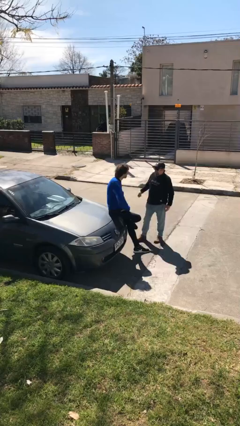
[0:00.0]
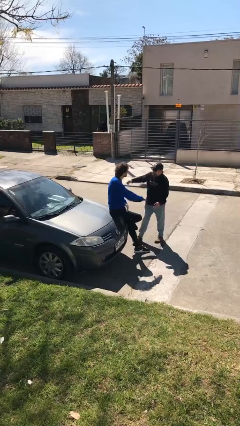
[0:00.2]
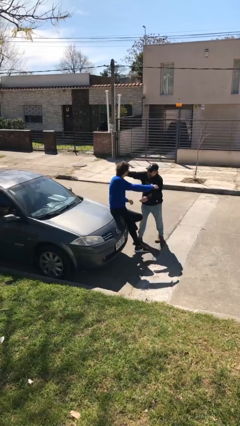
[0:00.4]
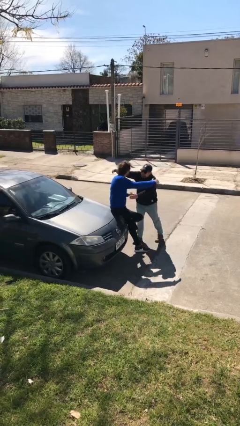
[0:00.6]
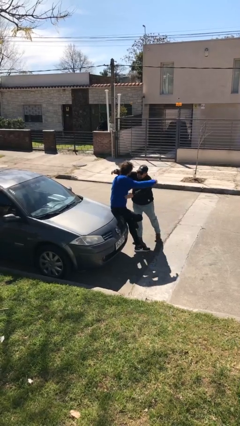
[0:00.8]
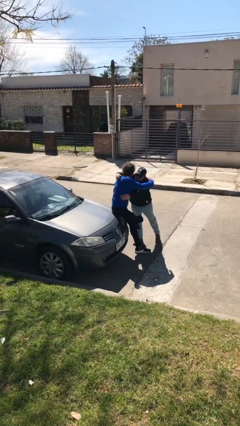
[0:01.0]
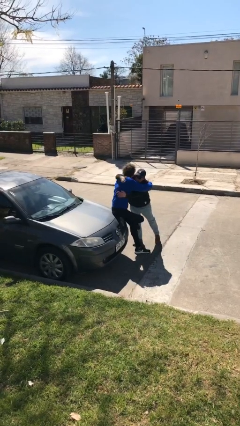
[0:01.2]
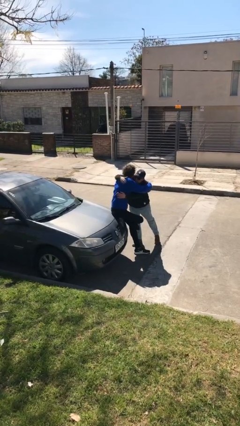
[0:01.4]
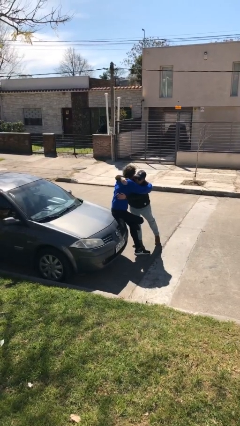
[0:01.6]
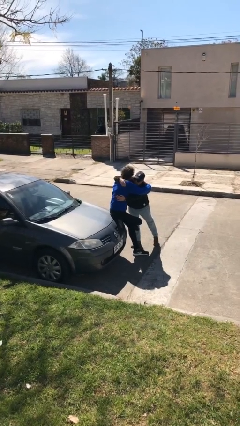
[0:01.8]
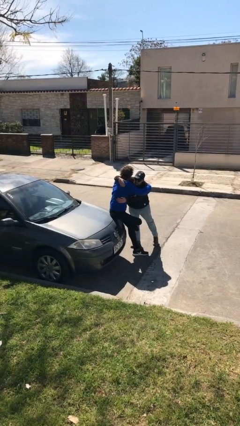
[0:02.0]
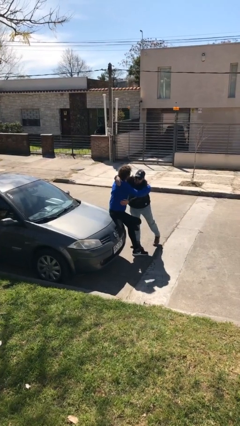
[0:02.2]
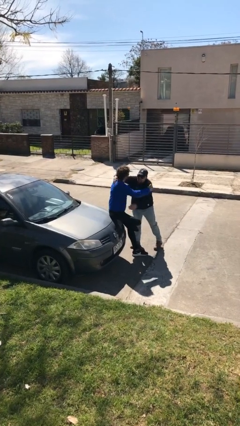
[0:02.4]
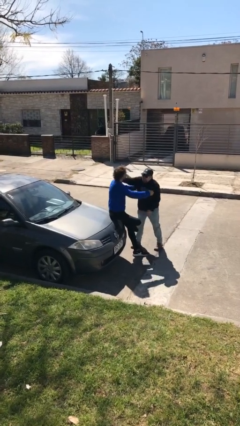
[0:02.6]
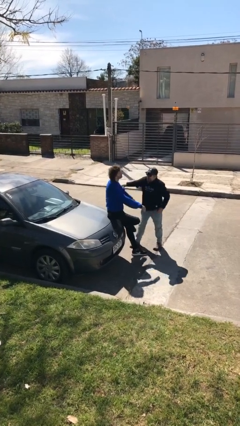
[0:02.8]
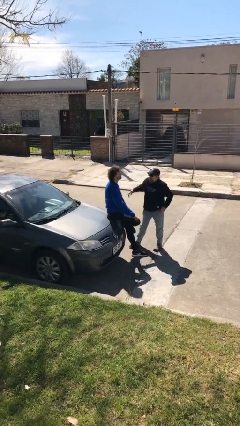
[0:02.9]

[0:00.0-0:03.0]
person embraces person

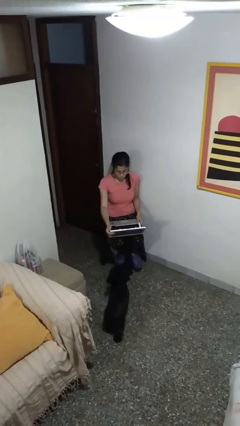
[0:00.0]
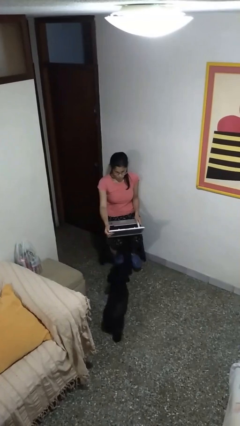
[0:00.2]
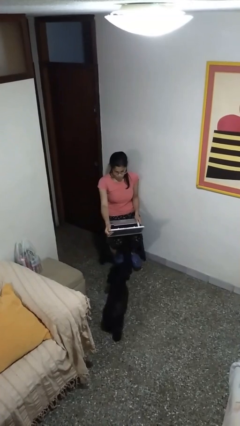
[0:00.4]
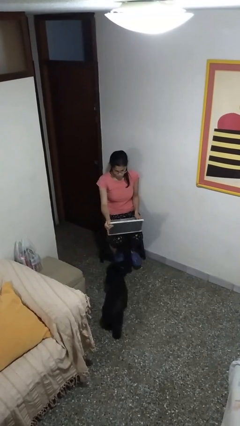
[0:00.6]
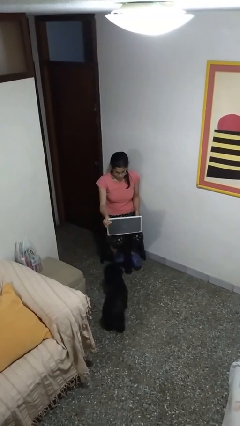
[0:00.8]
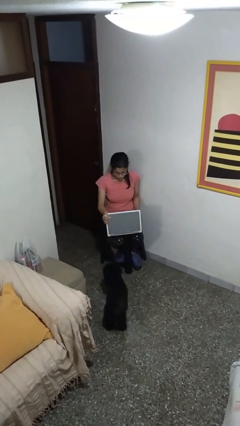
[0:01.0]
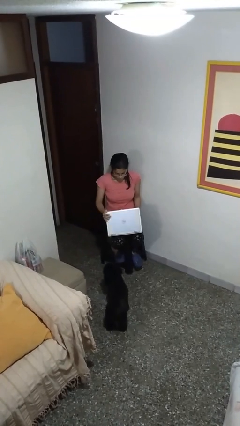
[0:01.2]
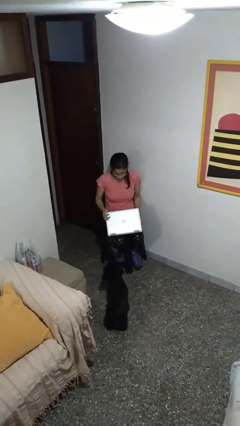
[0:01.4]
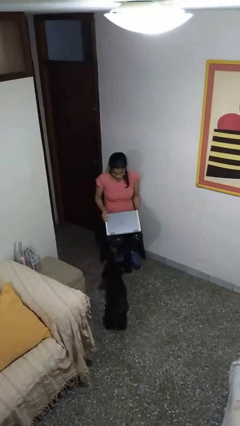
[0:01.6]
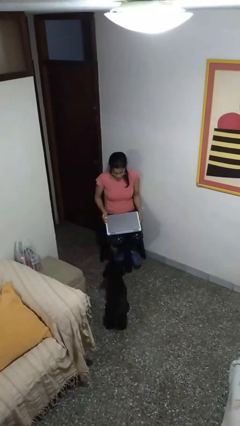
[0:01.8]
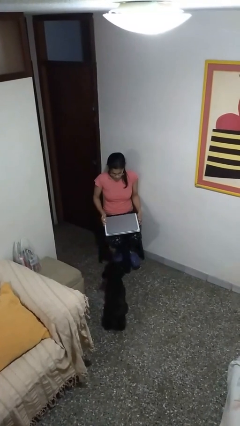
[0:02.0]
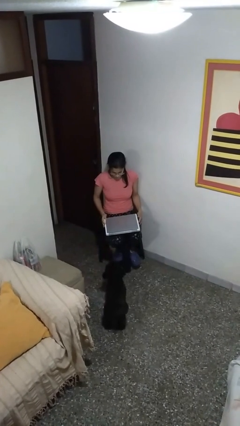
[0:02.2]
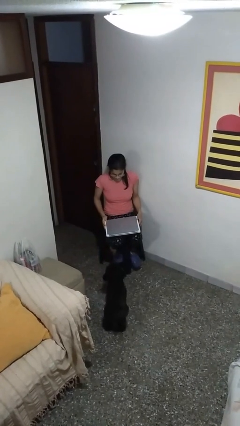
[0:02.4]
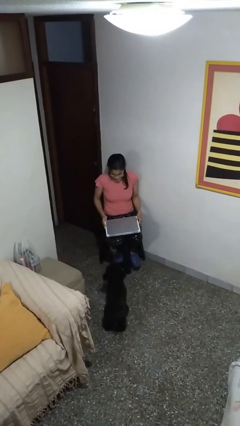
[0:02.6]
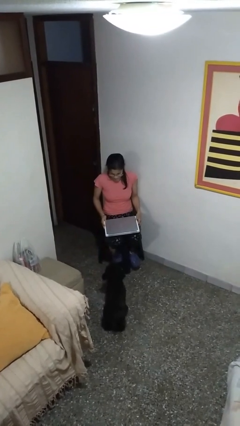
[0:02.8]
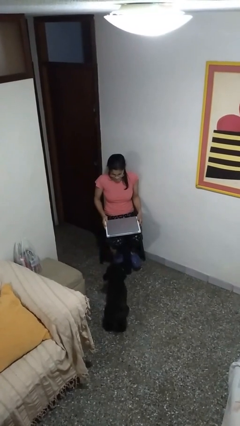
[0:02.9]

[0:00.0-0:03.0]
person closes laptop

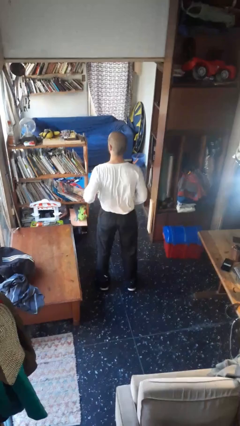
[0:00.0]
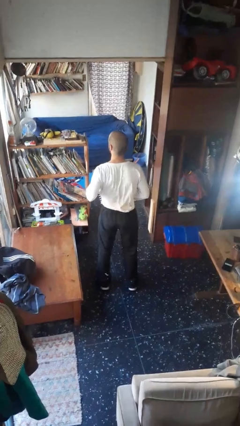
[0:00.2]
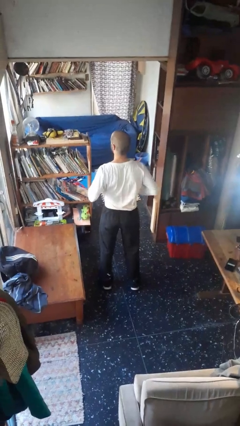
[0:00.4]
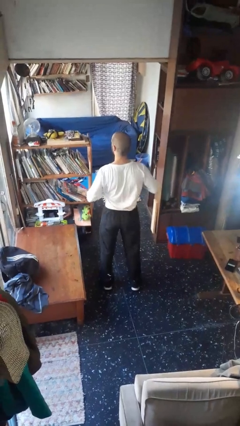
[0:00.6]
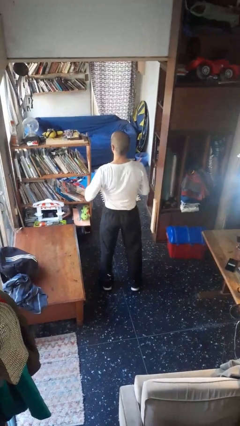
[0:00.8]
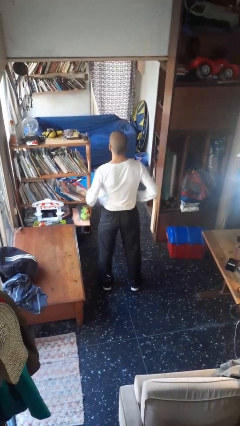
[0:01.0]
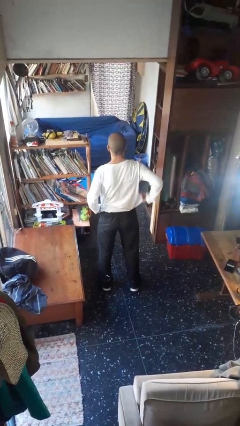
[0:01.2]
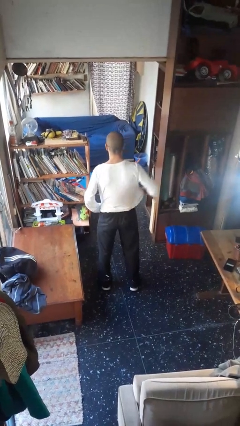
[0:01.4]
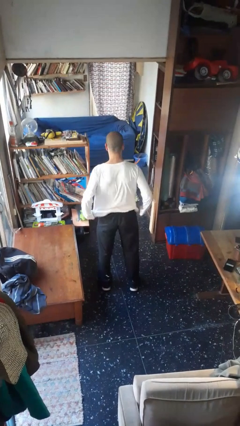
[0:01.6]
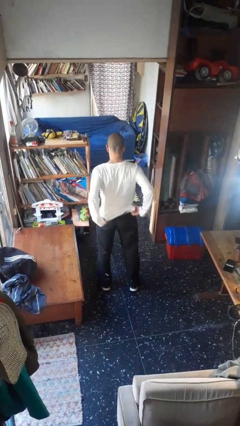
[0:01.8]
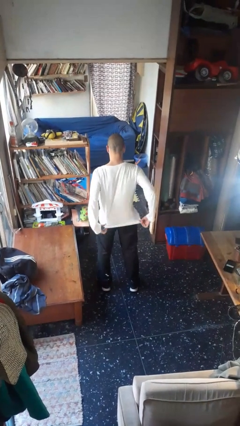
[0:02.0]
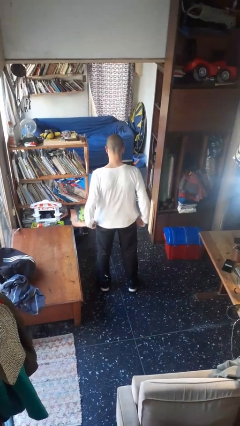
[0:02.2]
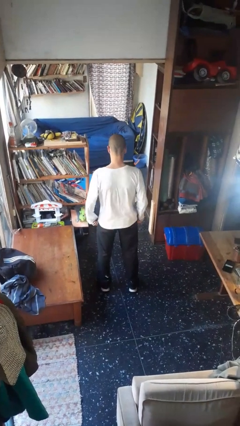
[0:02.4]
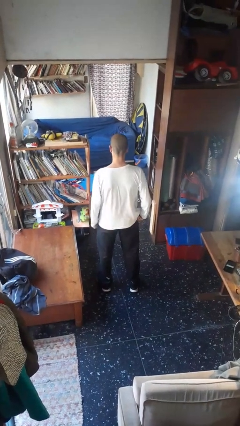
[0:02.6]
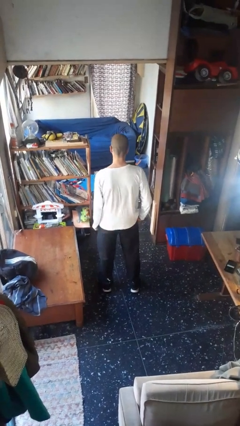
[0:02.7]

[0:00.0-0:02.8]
person untucks shirt

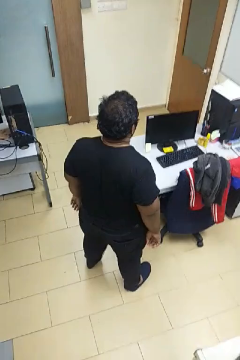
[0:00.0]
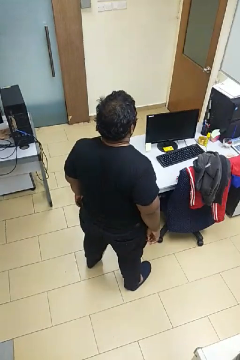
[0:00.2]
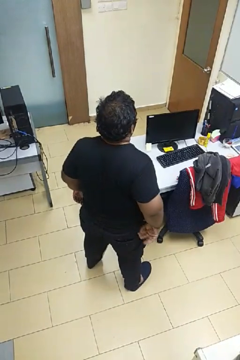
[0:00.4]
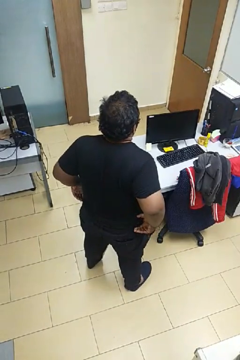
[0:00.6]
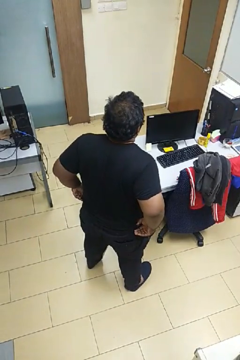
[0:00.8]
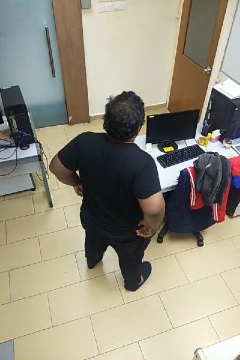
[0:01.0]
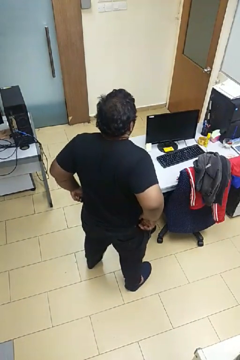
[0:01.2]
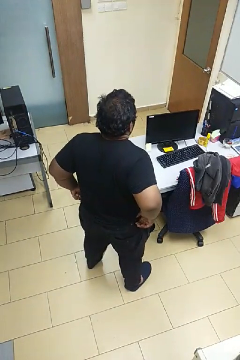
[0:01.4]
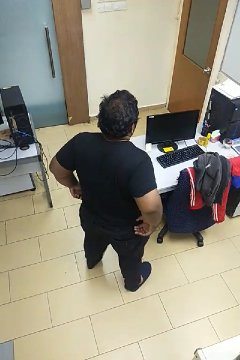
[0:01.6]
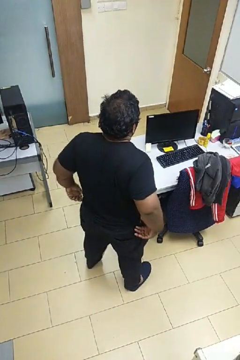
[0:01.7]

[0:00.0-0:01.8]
person hikes up pants

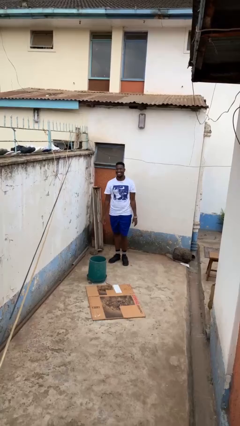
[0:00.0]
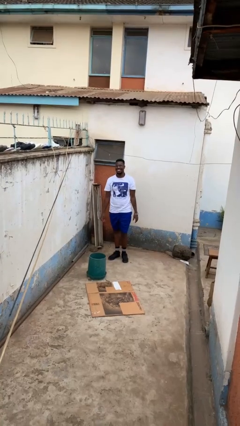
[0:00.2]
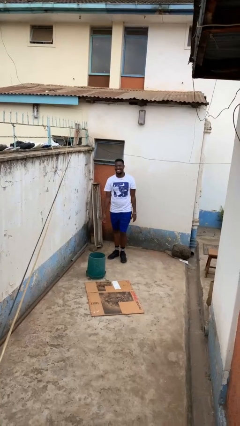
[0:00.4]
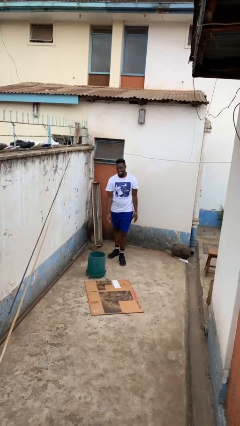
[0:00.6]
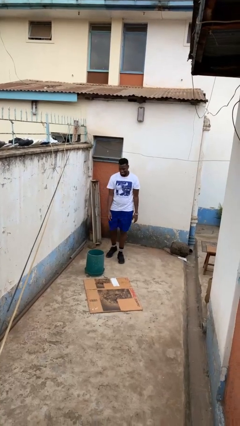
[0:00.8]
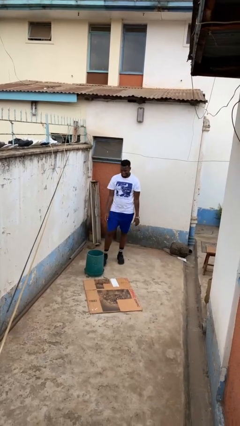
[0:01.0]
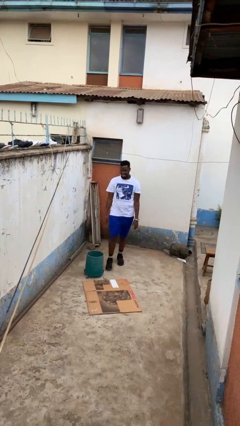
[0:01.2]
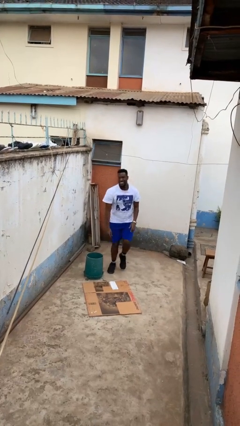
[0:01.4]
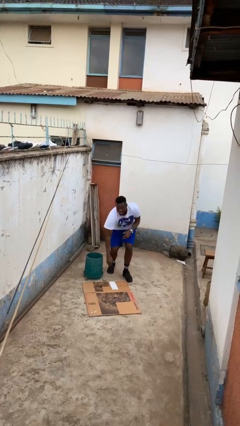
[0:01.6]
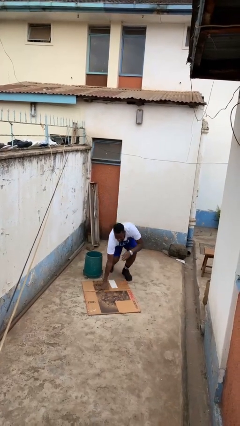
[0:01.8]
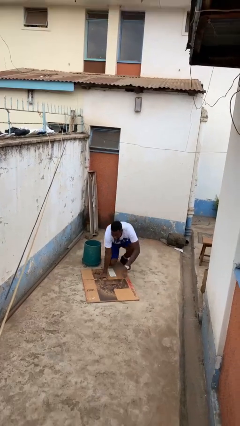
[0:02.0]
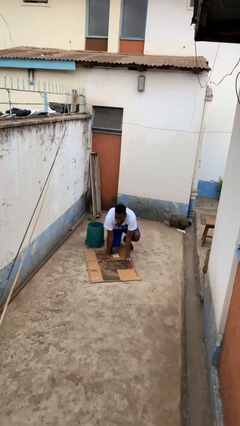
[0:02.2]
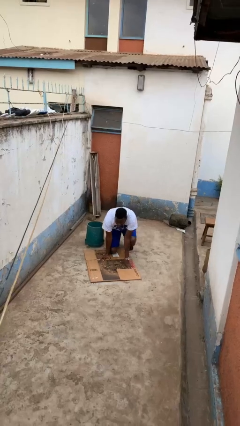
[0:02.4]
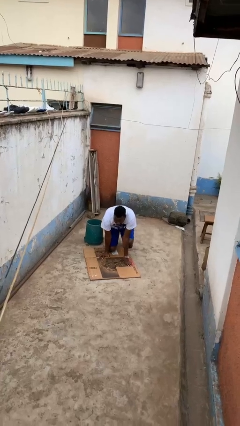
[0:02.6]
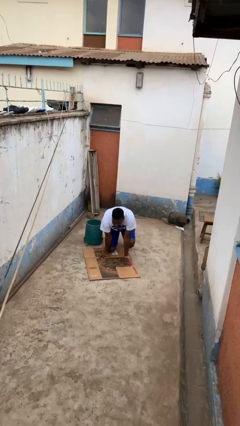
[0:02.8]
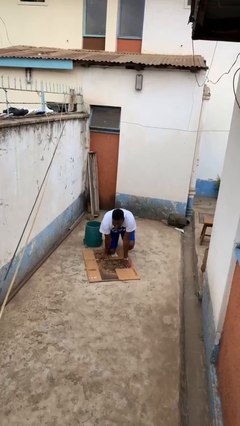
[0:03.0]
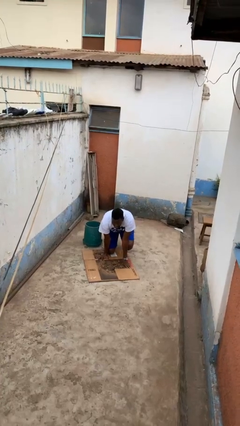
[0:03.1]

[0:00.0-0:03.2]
person trips on object on floor

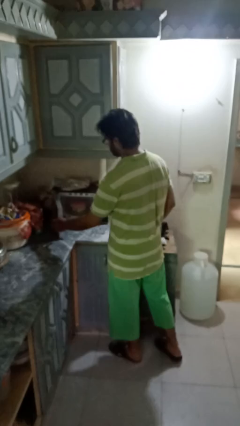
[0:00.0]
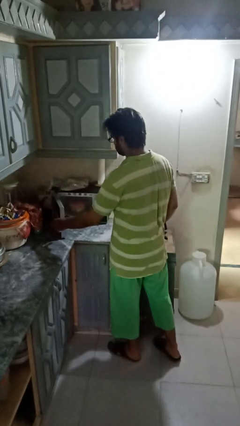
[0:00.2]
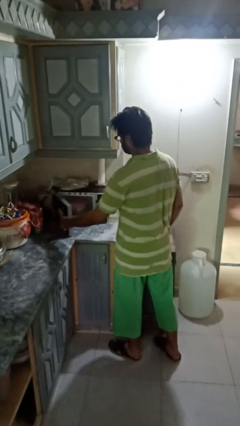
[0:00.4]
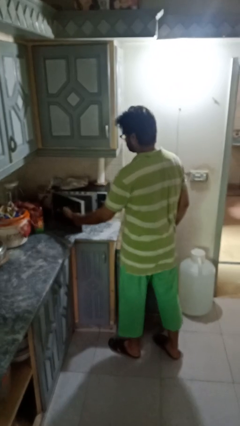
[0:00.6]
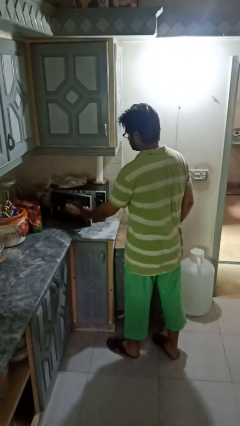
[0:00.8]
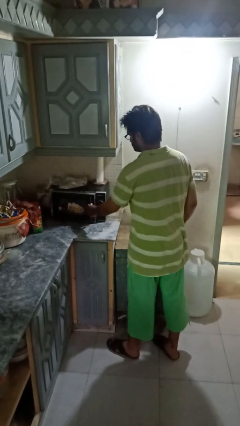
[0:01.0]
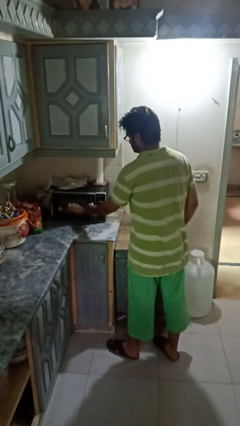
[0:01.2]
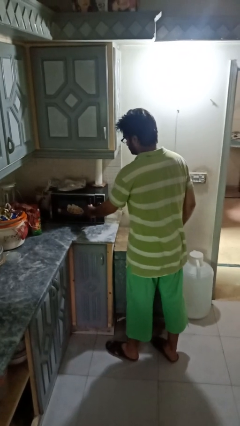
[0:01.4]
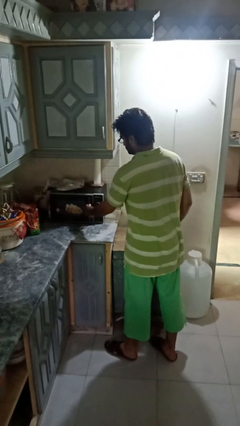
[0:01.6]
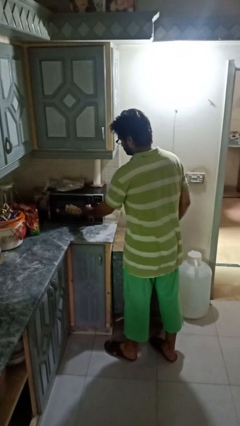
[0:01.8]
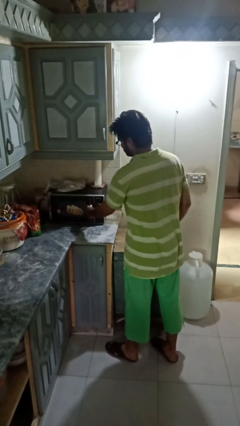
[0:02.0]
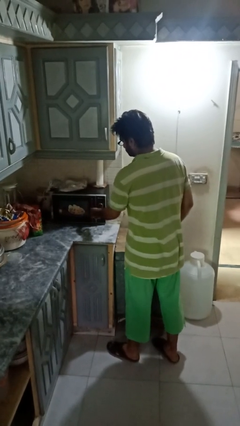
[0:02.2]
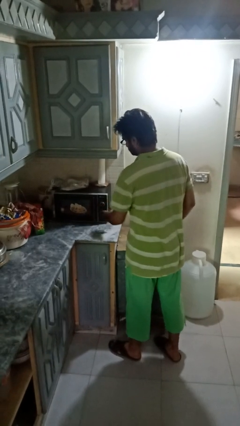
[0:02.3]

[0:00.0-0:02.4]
person closes microwave

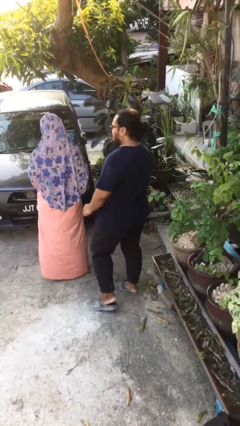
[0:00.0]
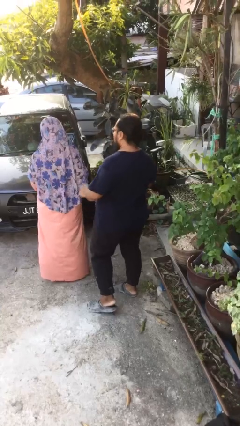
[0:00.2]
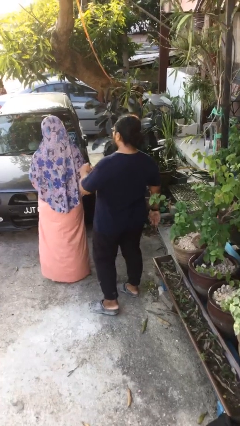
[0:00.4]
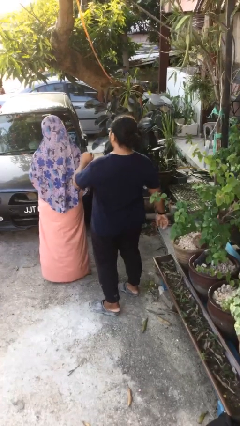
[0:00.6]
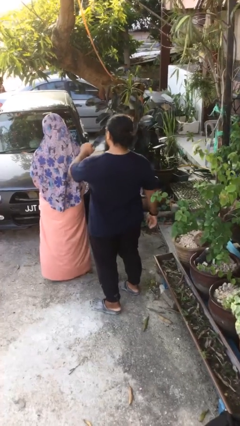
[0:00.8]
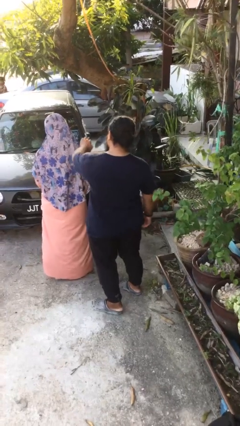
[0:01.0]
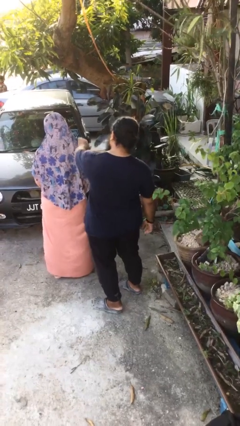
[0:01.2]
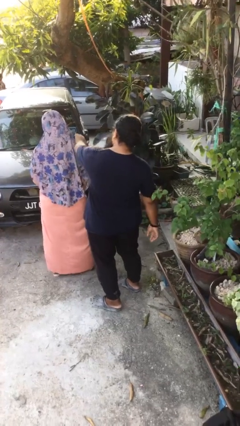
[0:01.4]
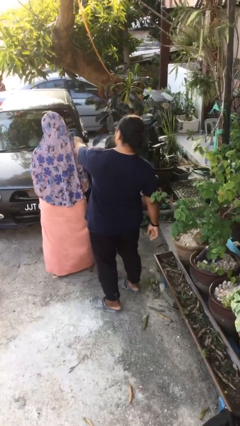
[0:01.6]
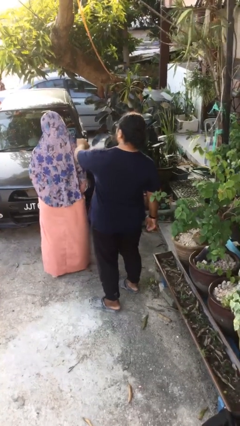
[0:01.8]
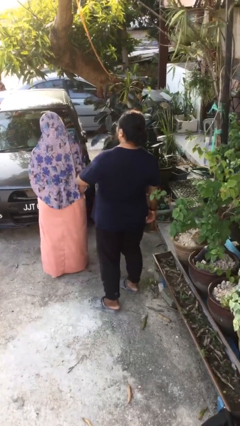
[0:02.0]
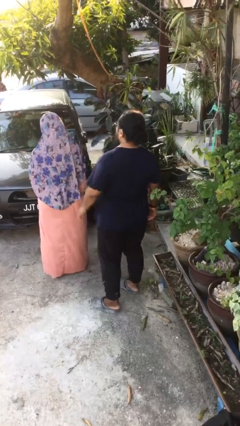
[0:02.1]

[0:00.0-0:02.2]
person touches back of person
